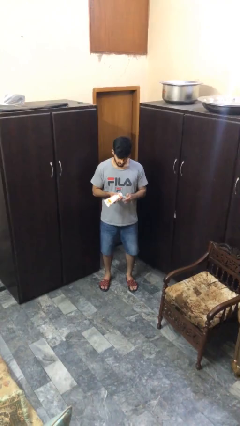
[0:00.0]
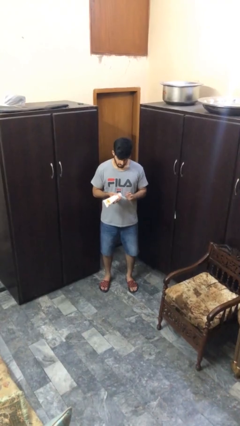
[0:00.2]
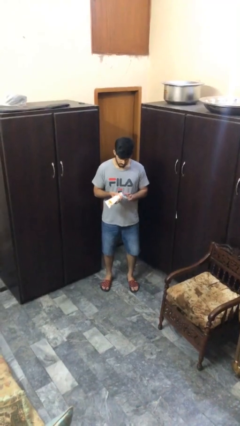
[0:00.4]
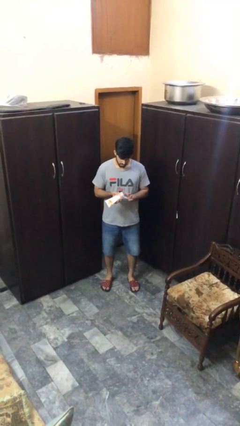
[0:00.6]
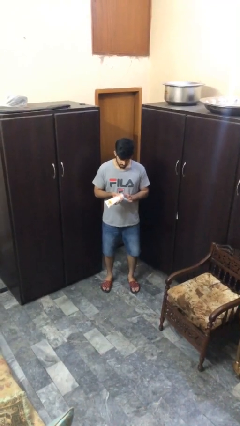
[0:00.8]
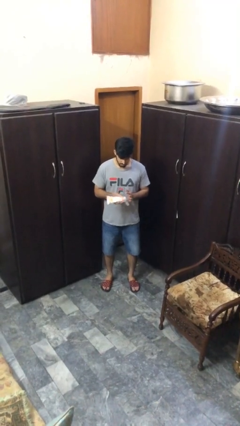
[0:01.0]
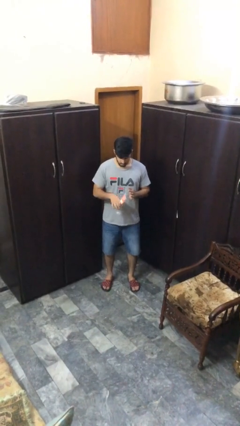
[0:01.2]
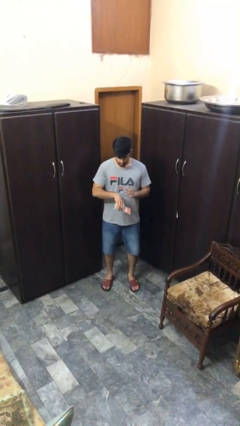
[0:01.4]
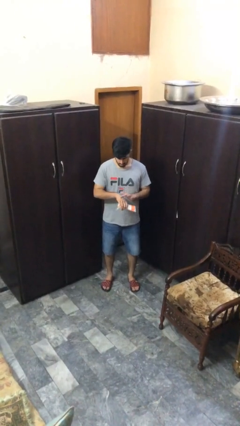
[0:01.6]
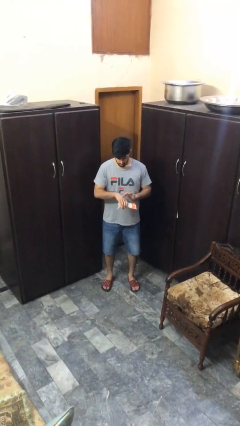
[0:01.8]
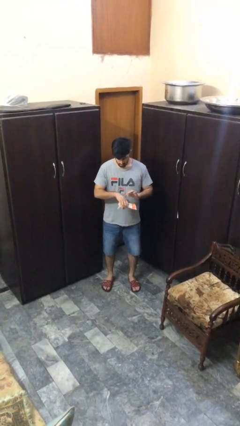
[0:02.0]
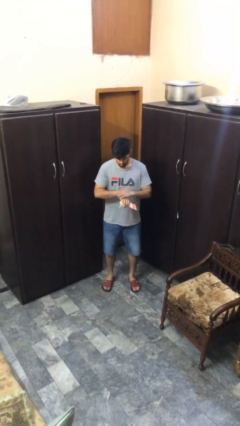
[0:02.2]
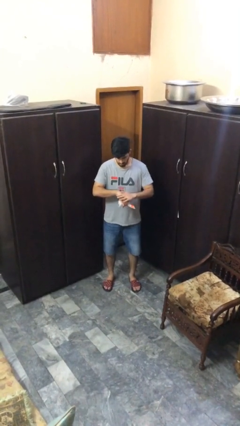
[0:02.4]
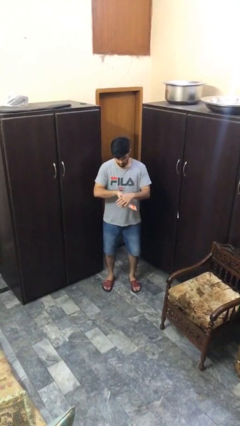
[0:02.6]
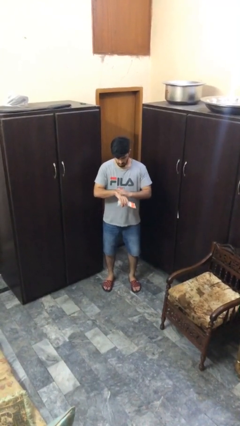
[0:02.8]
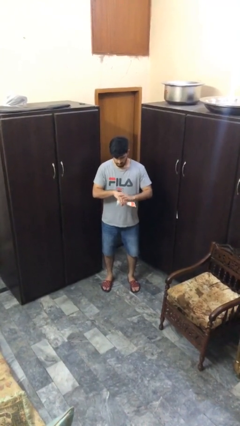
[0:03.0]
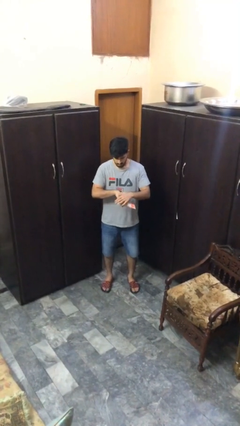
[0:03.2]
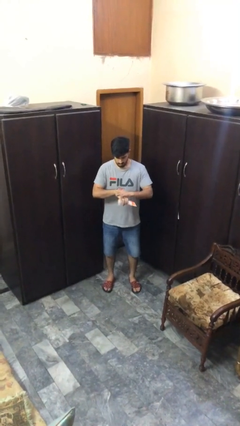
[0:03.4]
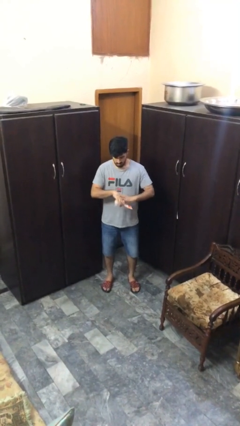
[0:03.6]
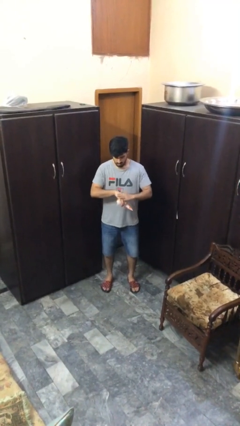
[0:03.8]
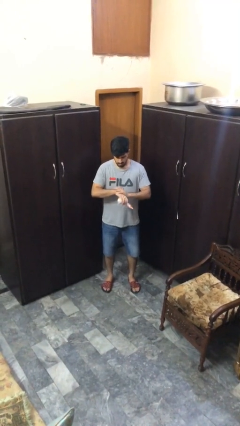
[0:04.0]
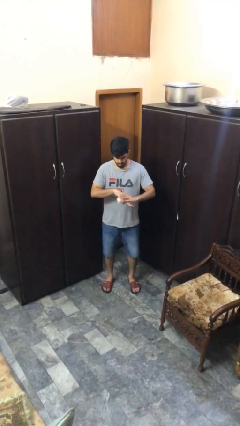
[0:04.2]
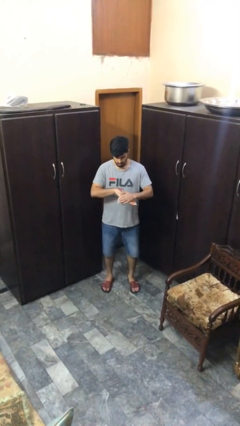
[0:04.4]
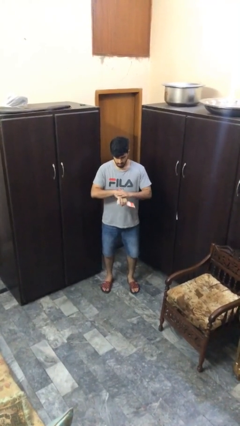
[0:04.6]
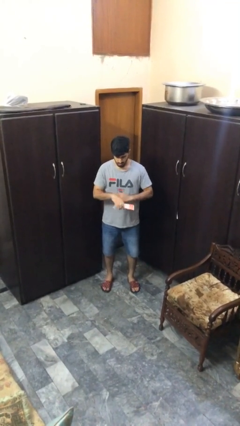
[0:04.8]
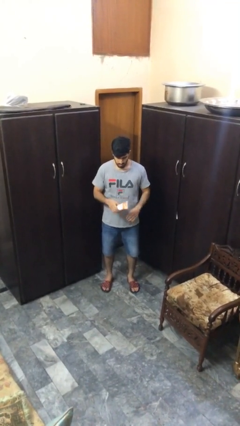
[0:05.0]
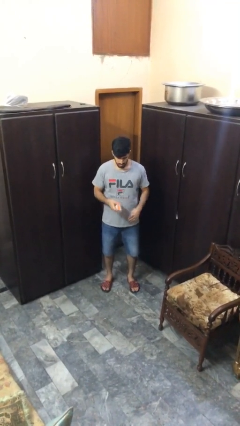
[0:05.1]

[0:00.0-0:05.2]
person applies sunscreen

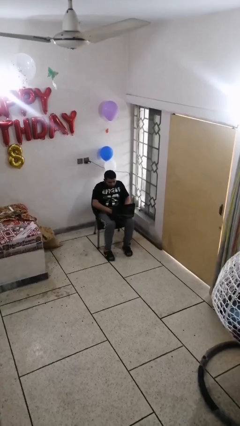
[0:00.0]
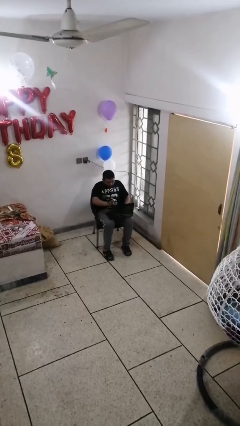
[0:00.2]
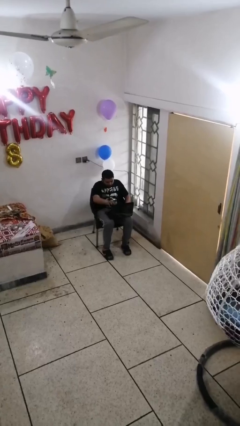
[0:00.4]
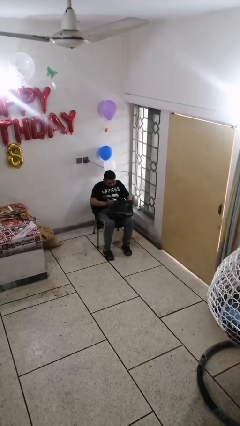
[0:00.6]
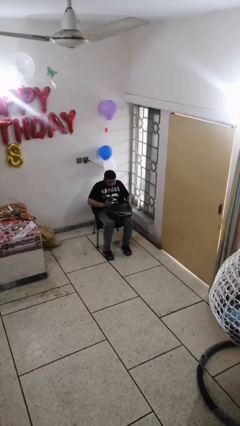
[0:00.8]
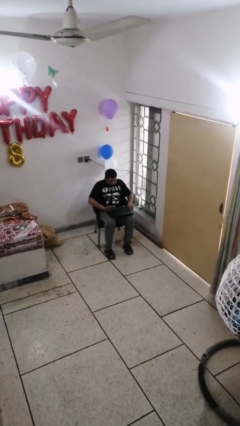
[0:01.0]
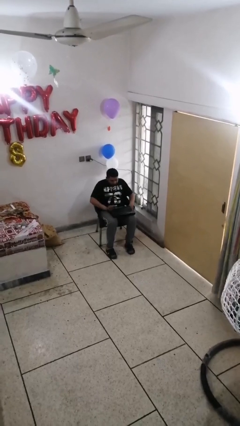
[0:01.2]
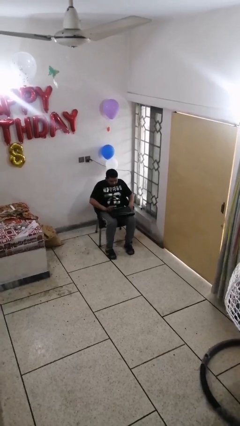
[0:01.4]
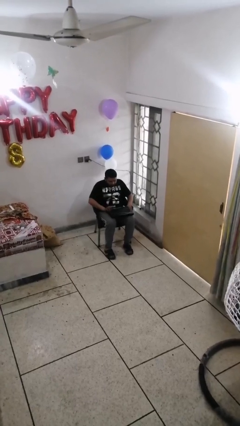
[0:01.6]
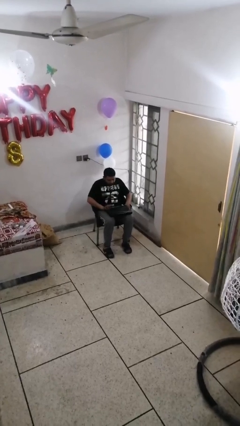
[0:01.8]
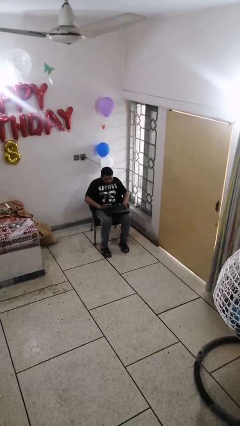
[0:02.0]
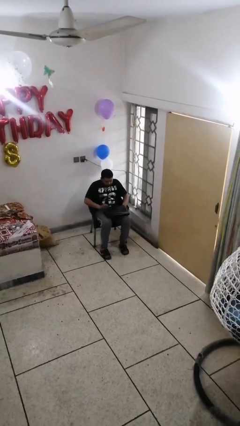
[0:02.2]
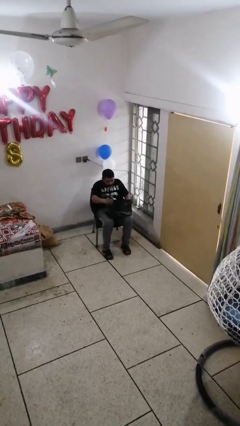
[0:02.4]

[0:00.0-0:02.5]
person interacts with laptop

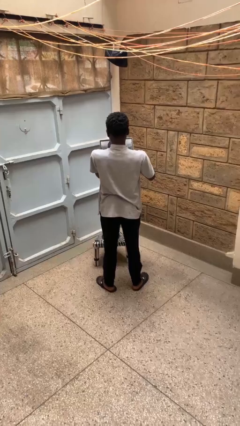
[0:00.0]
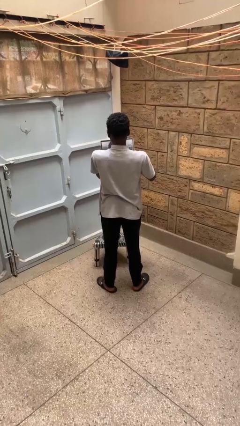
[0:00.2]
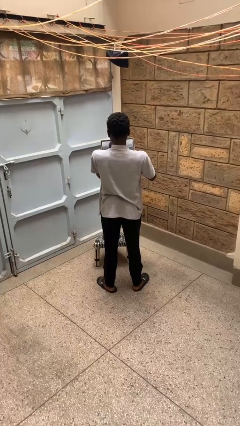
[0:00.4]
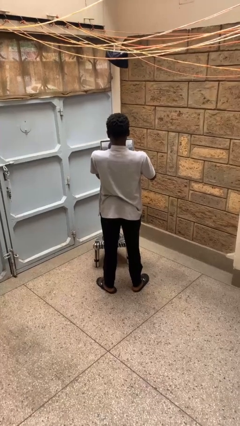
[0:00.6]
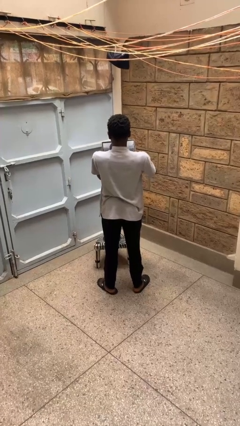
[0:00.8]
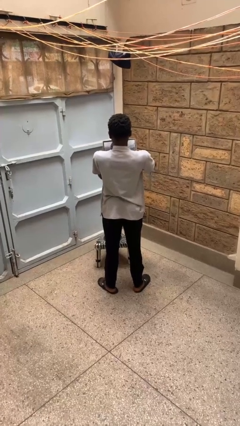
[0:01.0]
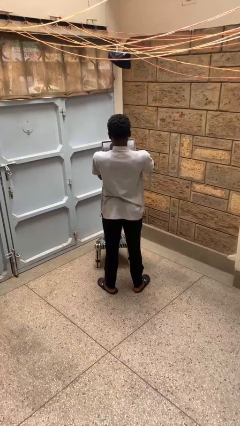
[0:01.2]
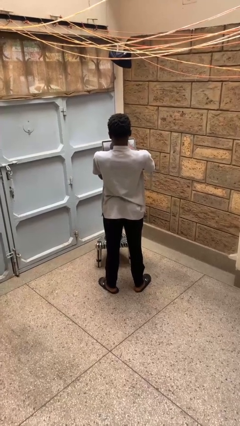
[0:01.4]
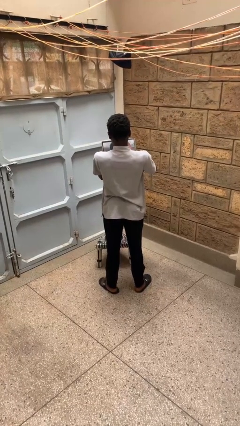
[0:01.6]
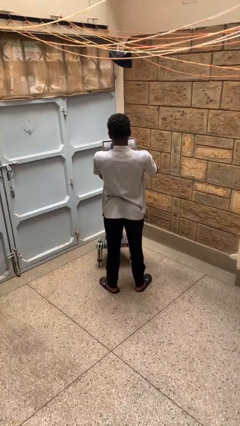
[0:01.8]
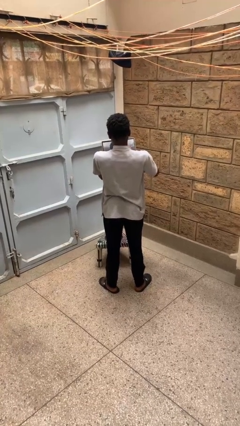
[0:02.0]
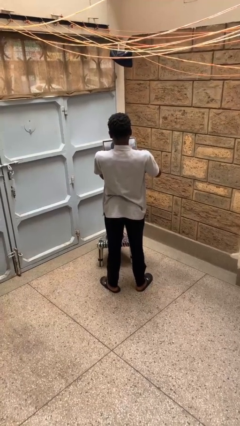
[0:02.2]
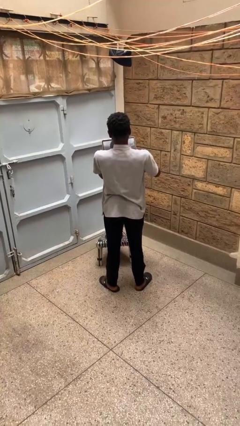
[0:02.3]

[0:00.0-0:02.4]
person interacts with tablet

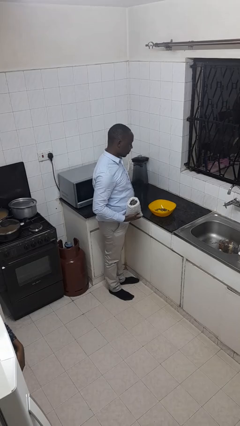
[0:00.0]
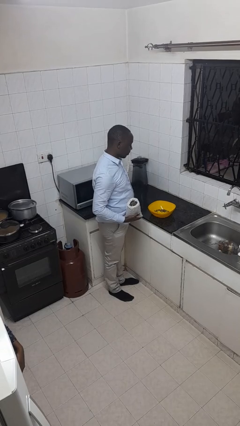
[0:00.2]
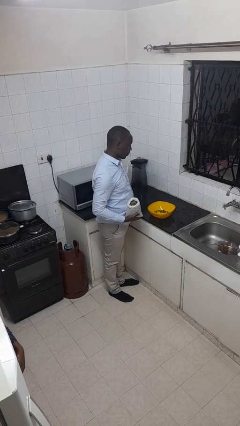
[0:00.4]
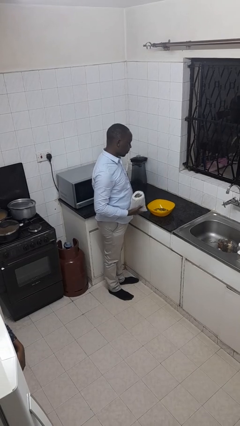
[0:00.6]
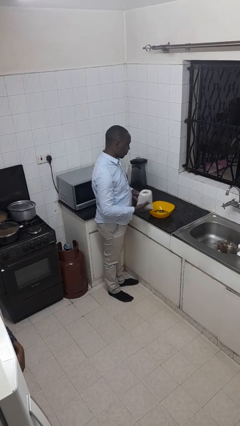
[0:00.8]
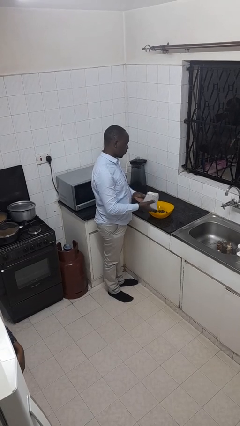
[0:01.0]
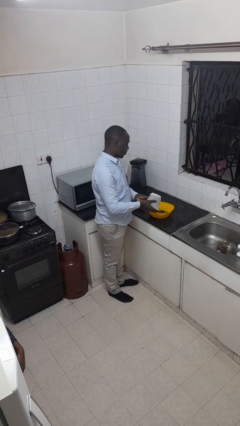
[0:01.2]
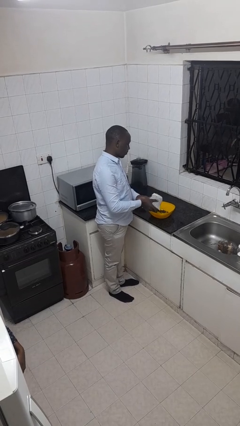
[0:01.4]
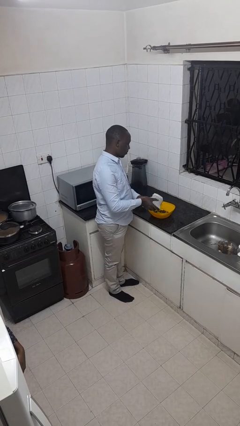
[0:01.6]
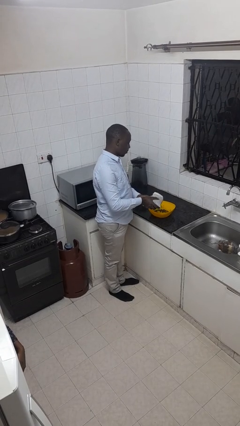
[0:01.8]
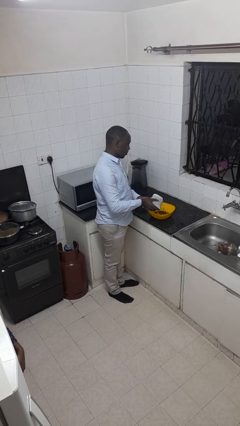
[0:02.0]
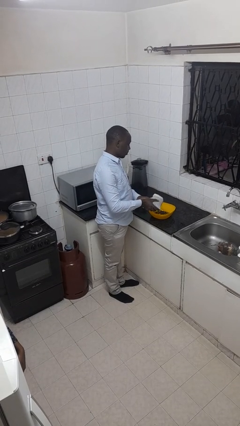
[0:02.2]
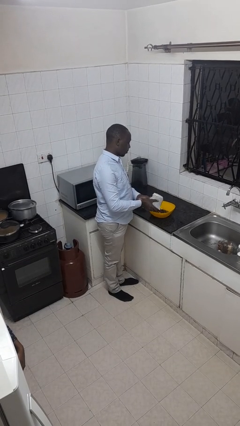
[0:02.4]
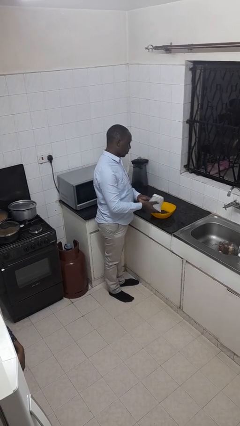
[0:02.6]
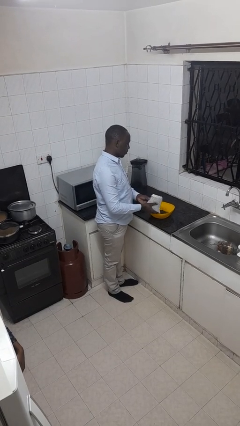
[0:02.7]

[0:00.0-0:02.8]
person pours into bowl

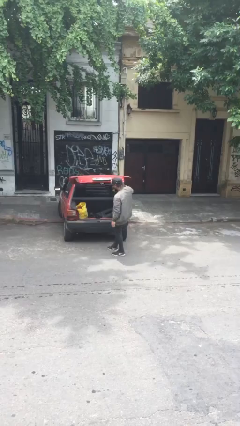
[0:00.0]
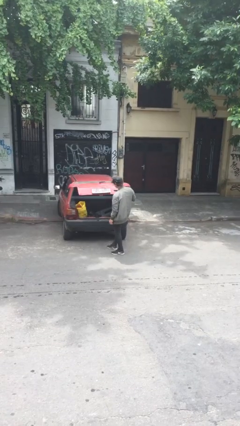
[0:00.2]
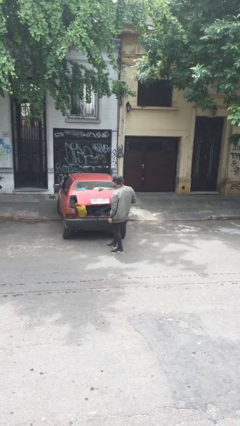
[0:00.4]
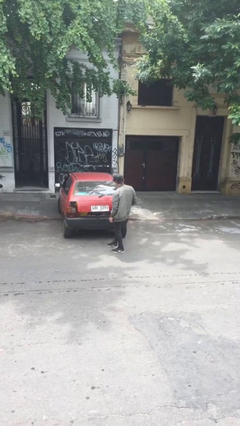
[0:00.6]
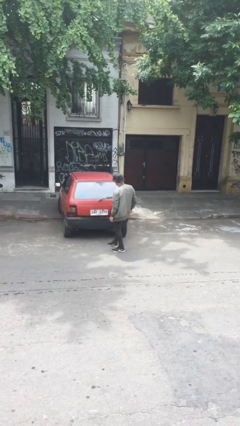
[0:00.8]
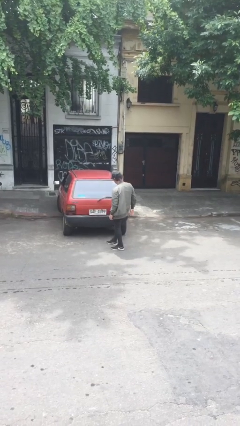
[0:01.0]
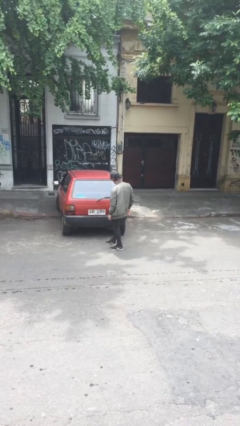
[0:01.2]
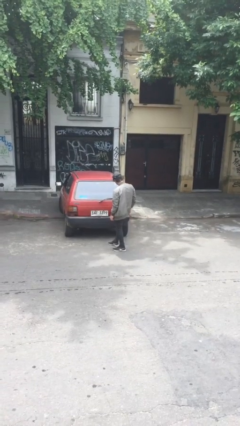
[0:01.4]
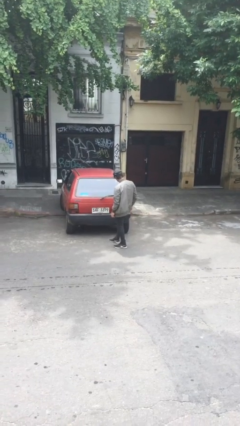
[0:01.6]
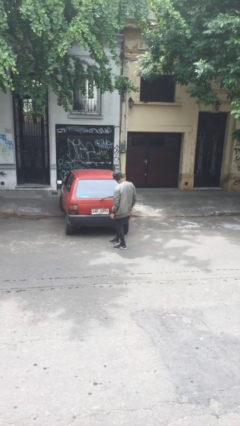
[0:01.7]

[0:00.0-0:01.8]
person closes car trunk

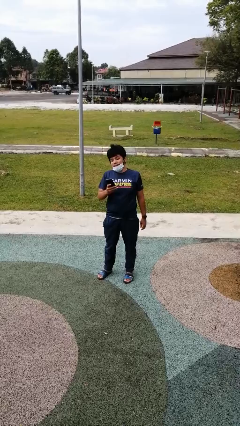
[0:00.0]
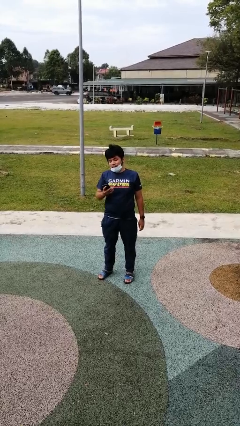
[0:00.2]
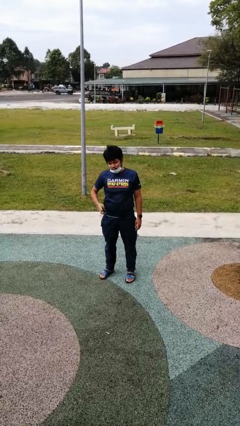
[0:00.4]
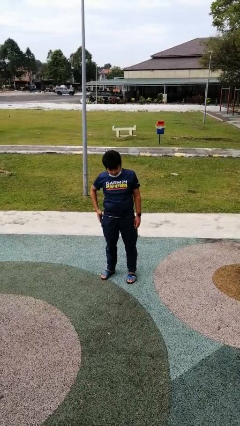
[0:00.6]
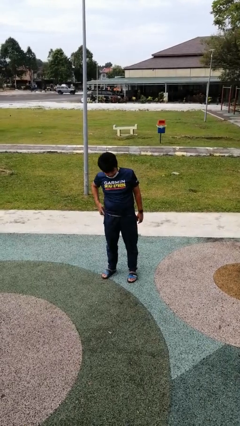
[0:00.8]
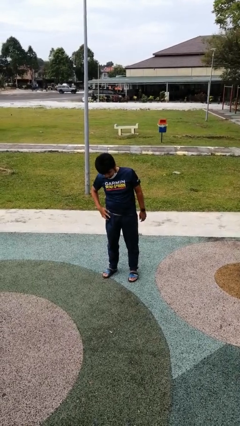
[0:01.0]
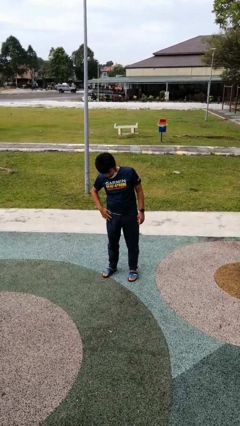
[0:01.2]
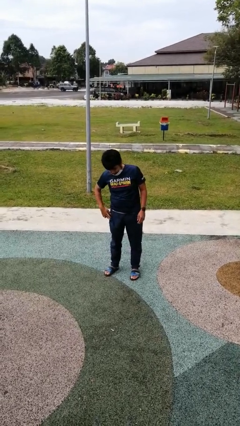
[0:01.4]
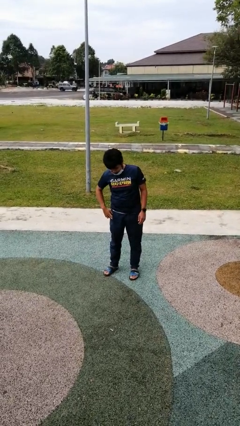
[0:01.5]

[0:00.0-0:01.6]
person puts phone into pocket

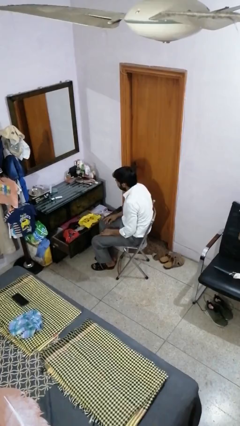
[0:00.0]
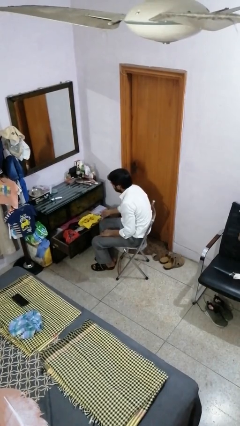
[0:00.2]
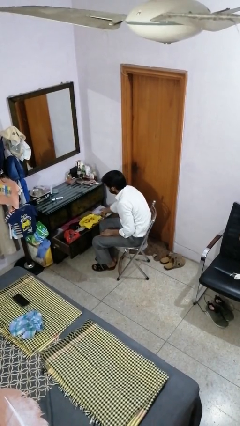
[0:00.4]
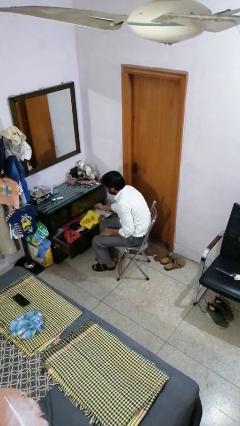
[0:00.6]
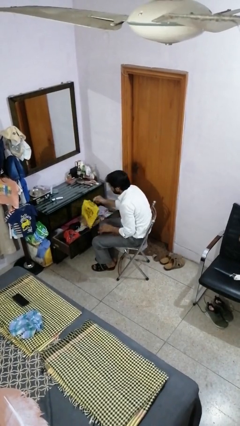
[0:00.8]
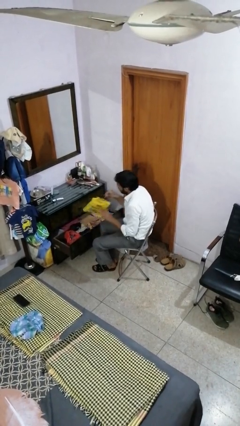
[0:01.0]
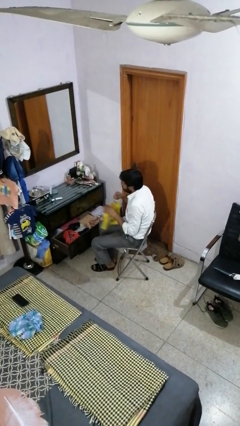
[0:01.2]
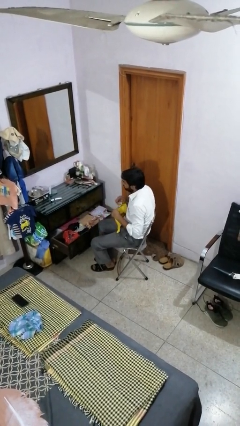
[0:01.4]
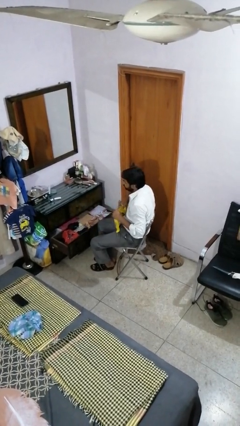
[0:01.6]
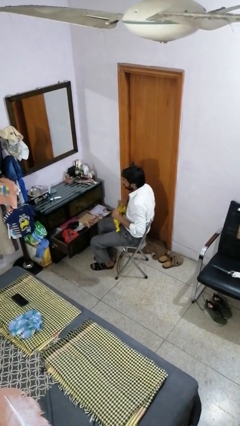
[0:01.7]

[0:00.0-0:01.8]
person takes clothes from dresser
